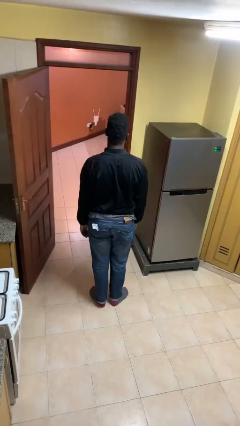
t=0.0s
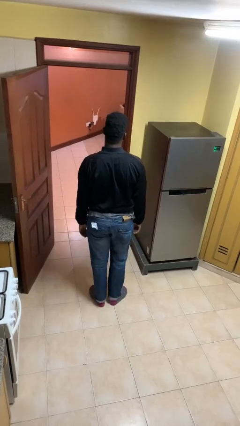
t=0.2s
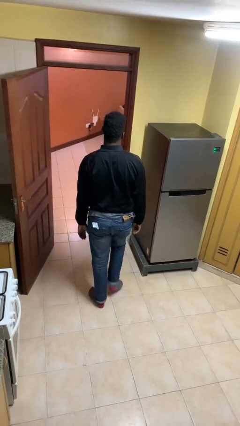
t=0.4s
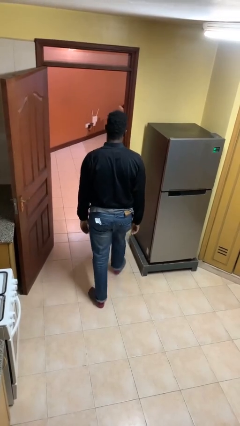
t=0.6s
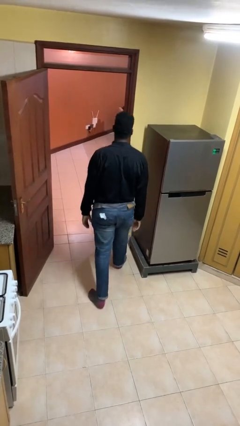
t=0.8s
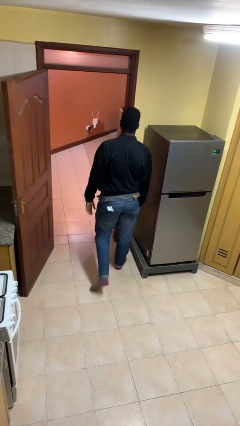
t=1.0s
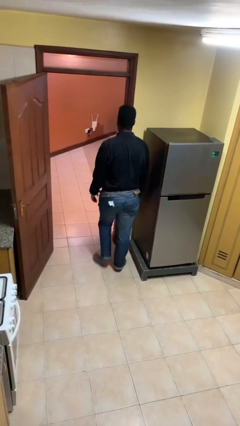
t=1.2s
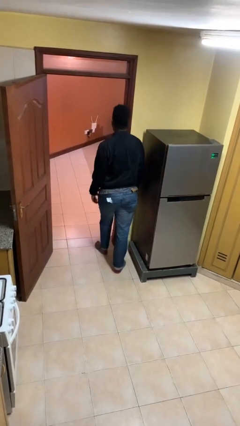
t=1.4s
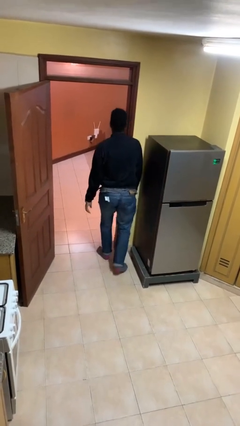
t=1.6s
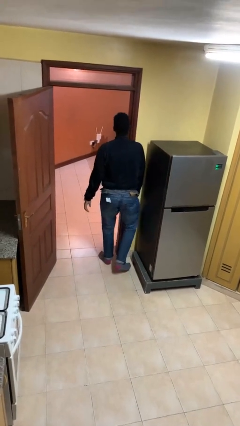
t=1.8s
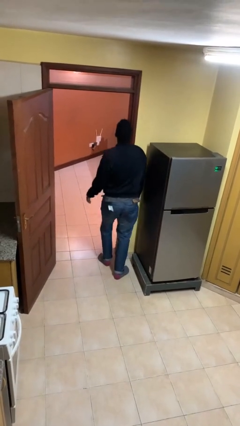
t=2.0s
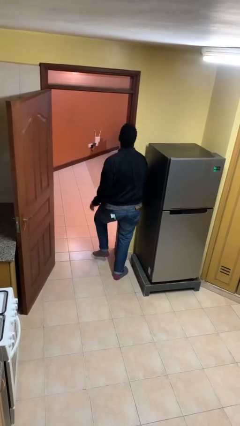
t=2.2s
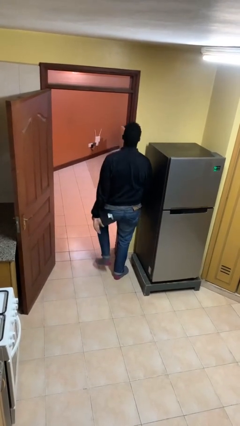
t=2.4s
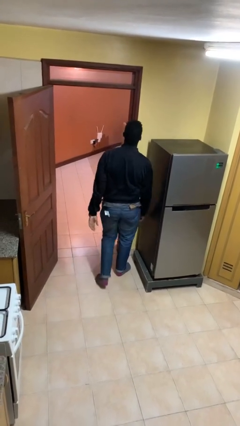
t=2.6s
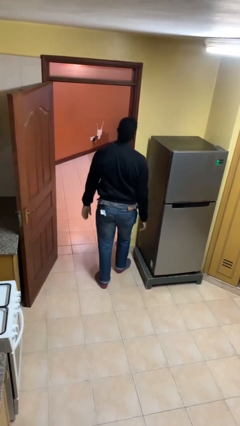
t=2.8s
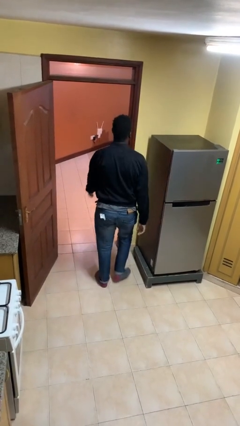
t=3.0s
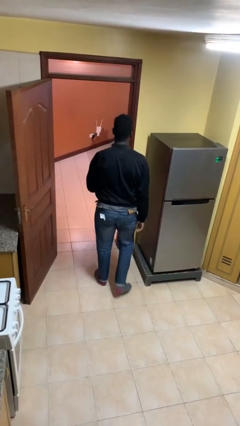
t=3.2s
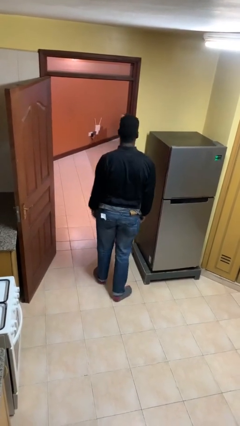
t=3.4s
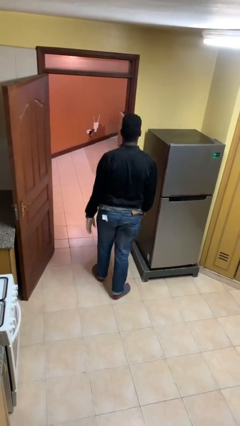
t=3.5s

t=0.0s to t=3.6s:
person bumps into wall

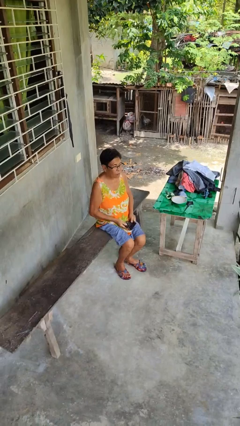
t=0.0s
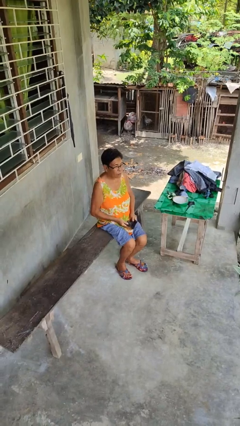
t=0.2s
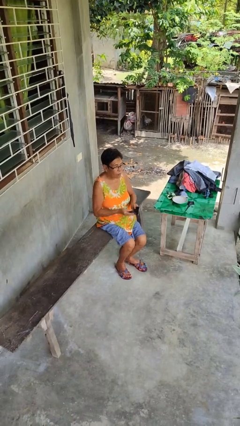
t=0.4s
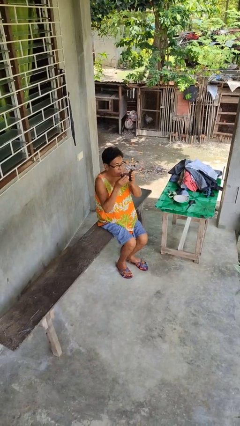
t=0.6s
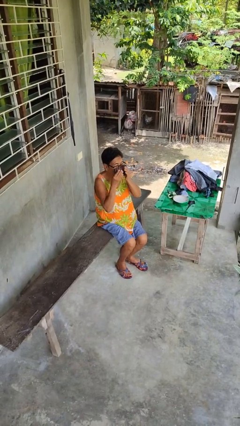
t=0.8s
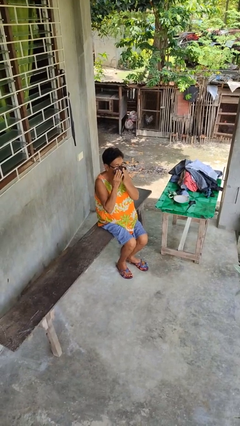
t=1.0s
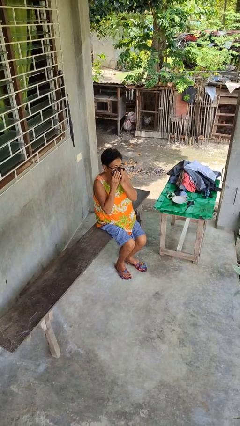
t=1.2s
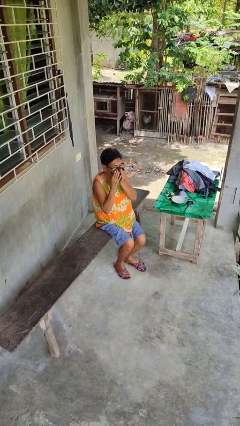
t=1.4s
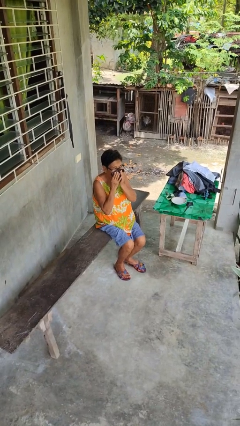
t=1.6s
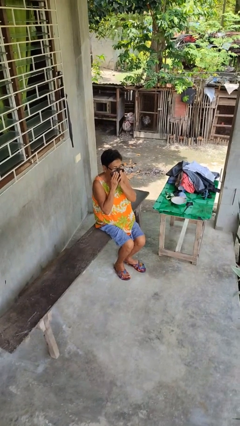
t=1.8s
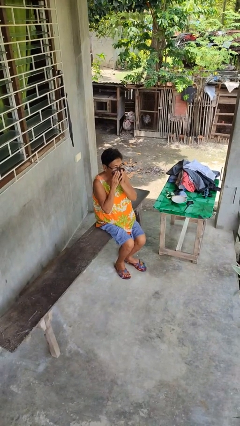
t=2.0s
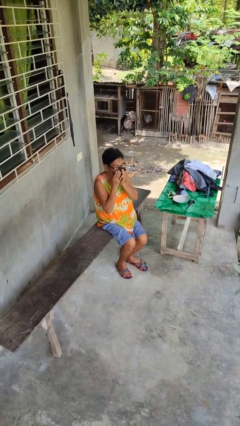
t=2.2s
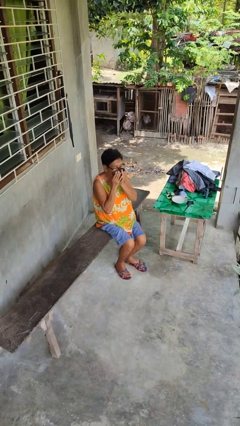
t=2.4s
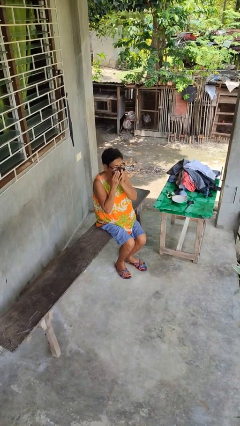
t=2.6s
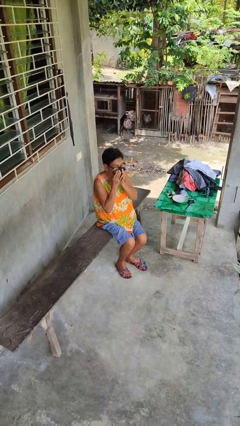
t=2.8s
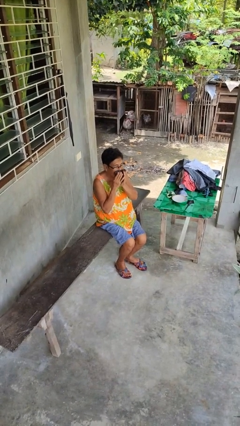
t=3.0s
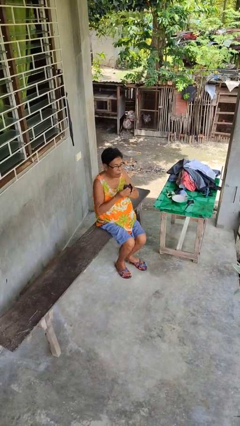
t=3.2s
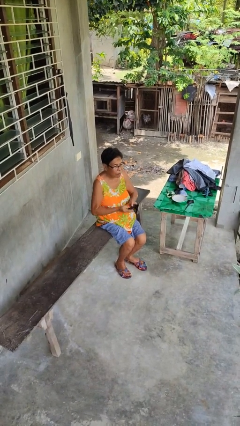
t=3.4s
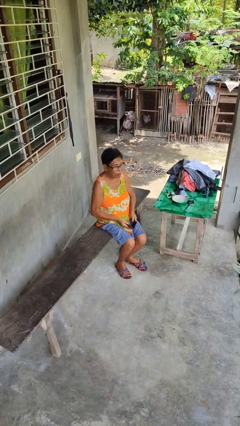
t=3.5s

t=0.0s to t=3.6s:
person blows nose

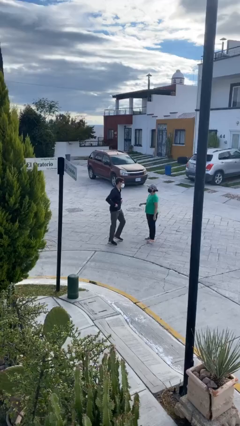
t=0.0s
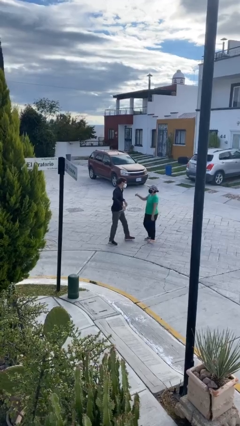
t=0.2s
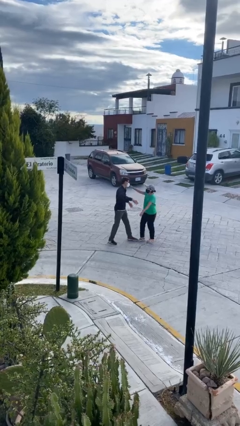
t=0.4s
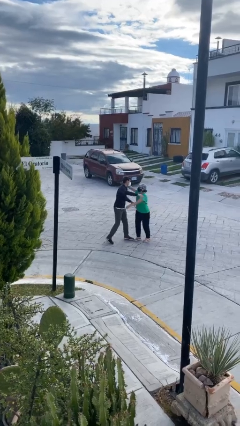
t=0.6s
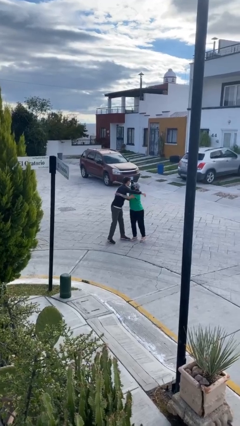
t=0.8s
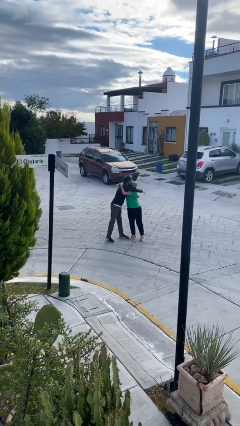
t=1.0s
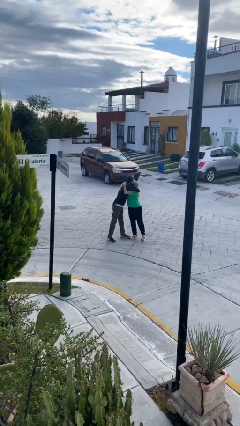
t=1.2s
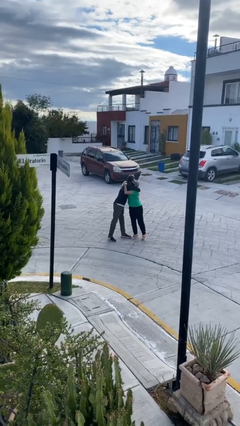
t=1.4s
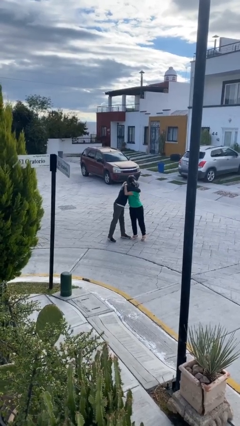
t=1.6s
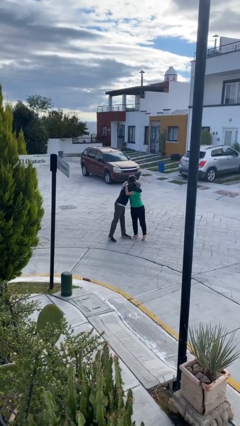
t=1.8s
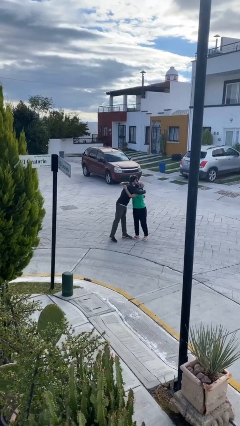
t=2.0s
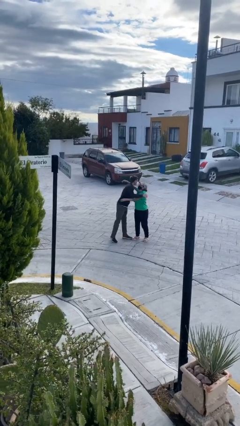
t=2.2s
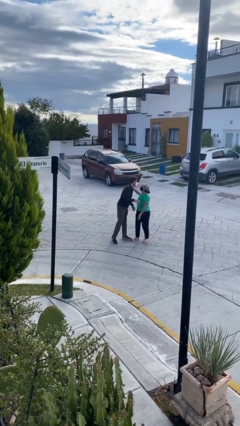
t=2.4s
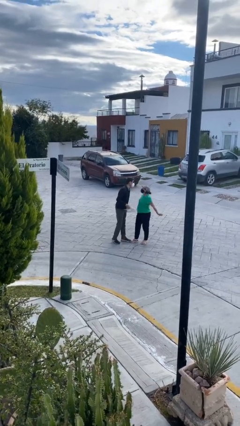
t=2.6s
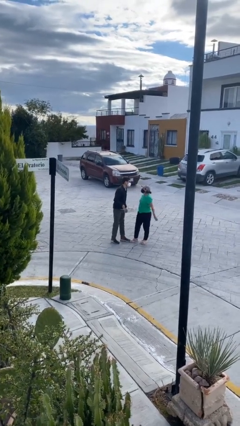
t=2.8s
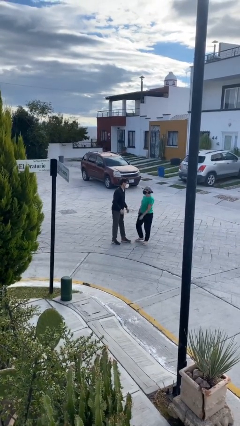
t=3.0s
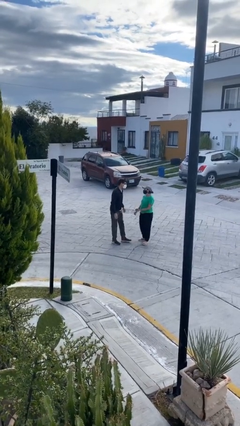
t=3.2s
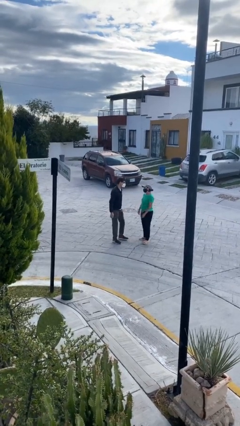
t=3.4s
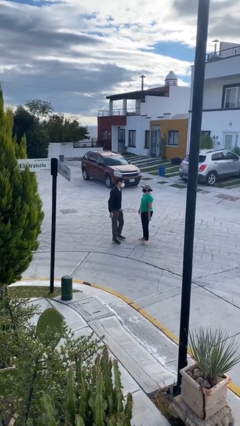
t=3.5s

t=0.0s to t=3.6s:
person embraces person

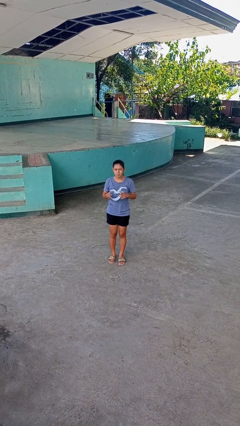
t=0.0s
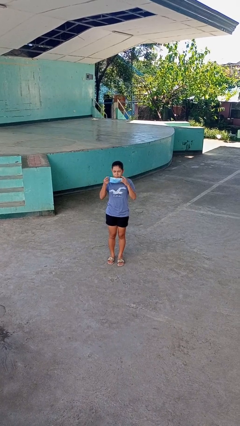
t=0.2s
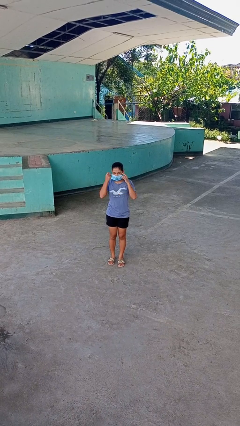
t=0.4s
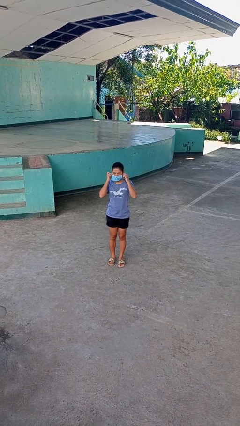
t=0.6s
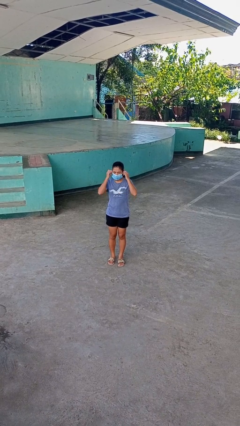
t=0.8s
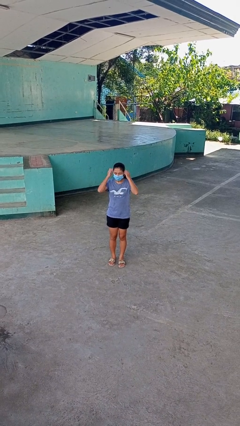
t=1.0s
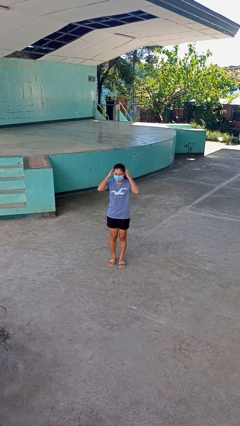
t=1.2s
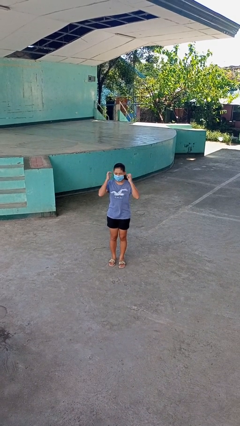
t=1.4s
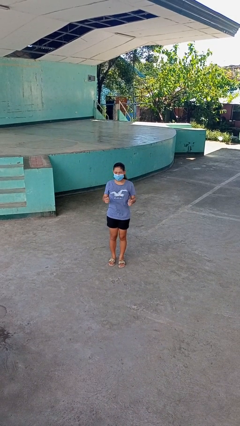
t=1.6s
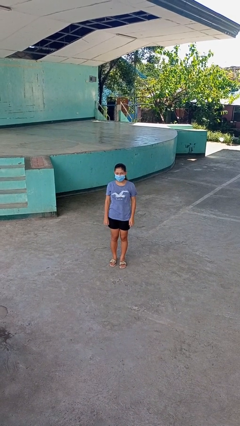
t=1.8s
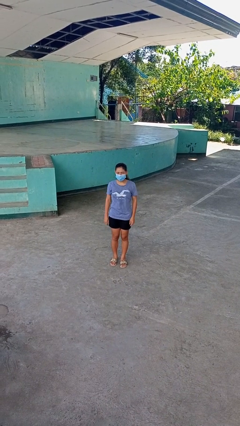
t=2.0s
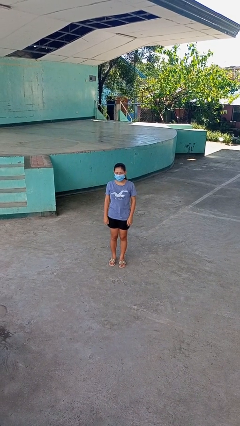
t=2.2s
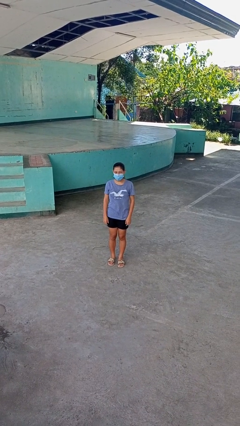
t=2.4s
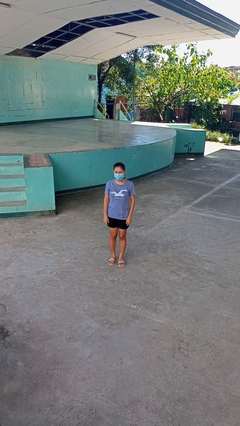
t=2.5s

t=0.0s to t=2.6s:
person puts on facemask

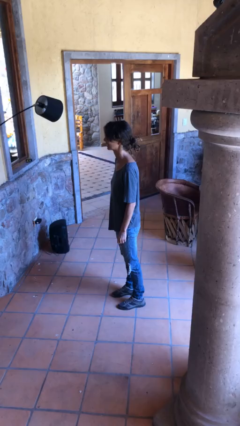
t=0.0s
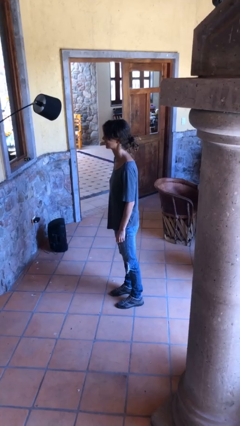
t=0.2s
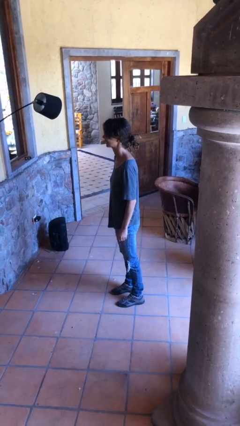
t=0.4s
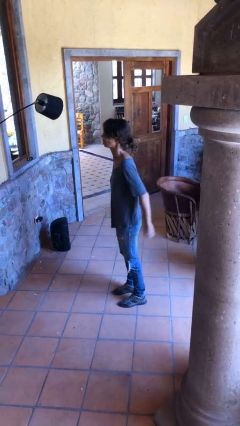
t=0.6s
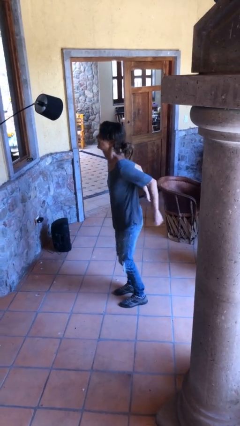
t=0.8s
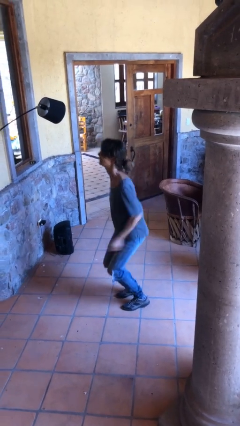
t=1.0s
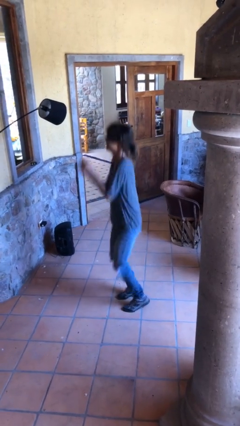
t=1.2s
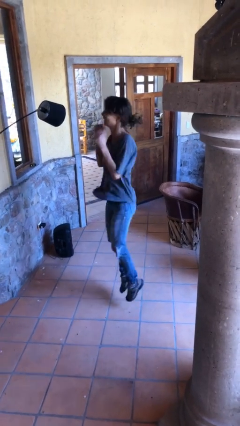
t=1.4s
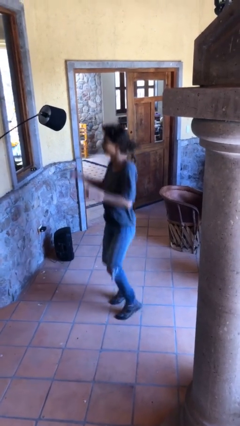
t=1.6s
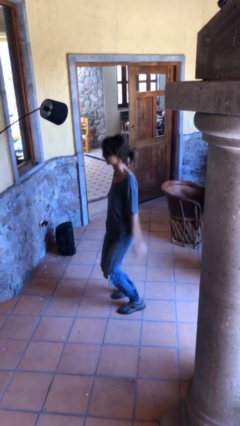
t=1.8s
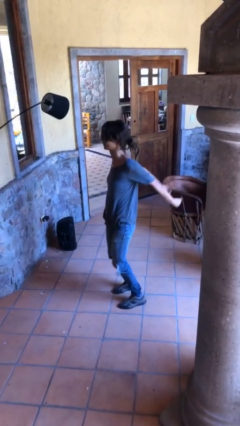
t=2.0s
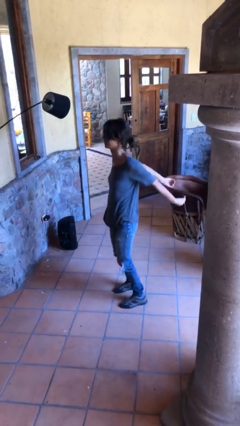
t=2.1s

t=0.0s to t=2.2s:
person jumps

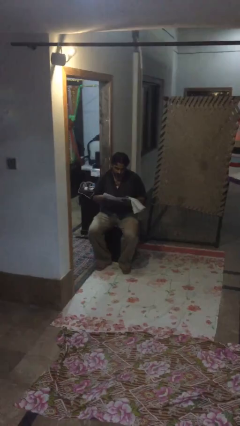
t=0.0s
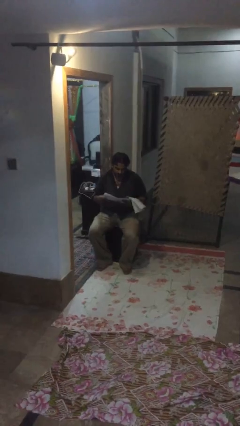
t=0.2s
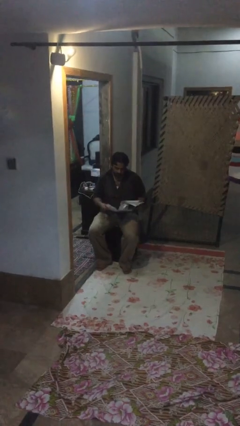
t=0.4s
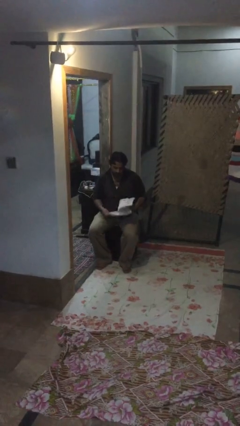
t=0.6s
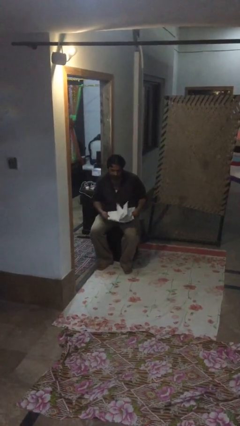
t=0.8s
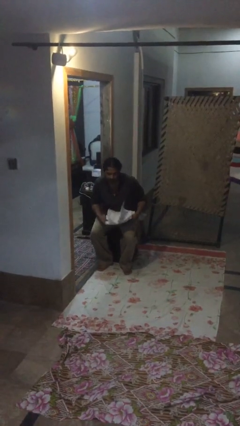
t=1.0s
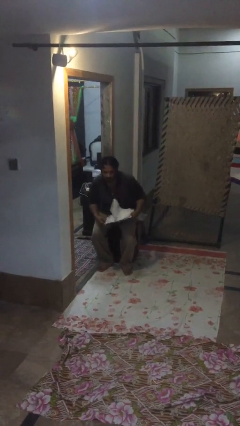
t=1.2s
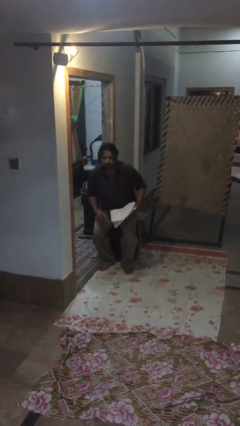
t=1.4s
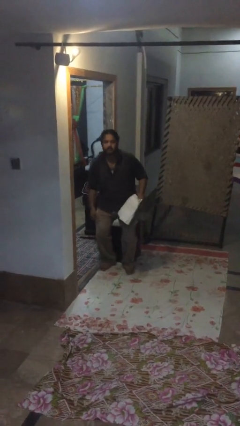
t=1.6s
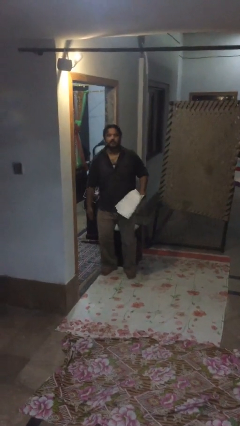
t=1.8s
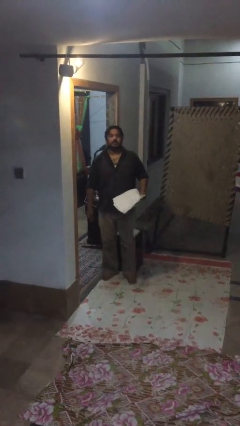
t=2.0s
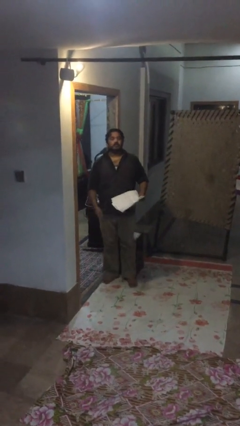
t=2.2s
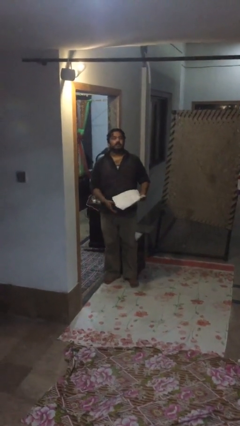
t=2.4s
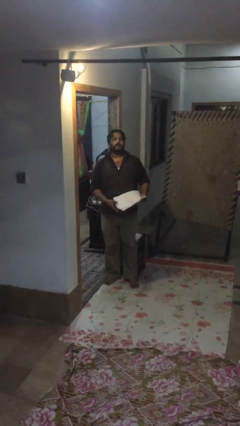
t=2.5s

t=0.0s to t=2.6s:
person stands up
